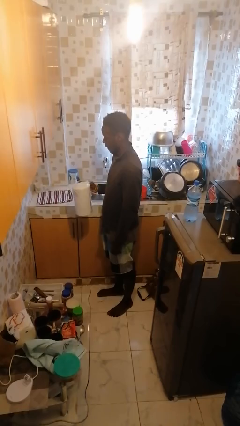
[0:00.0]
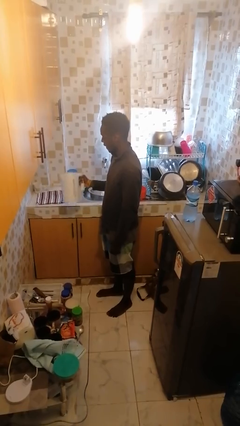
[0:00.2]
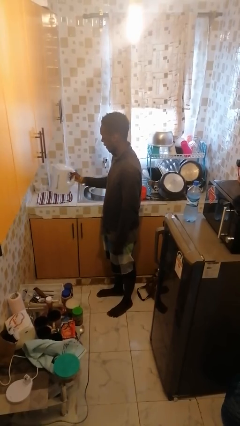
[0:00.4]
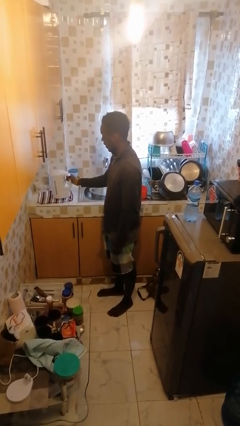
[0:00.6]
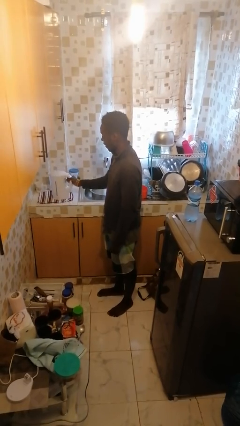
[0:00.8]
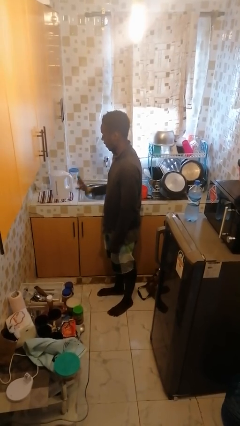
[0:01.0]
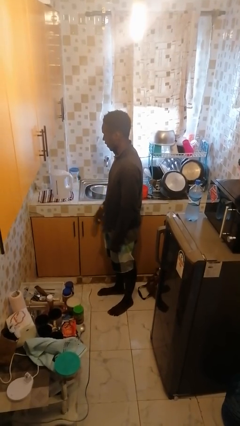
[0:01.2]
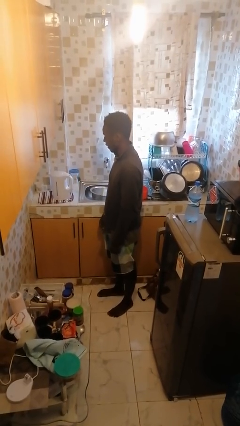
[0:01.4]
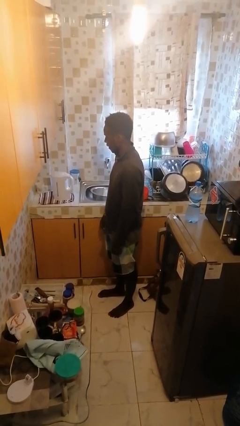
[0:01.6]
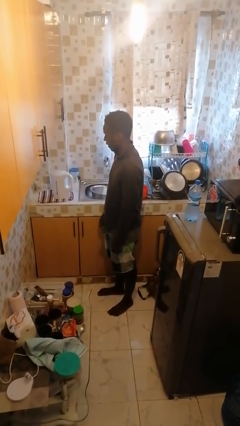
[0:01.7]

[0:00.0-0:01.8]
person puts down object on countertop

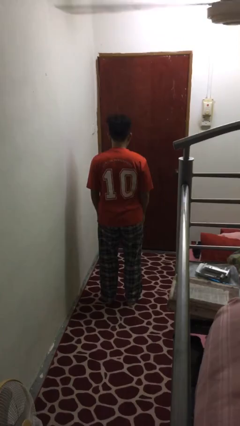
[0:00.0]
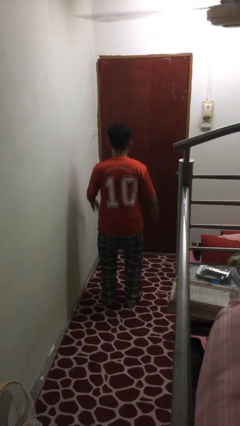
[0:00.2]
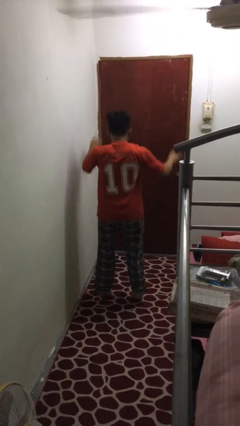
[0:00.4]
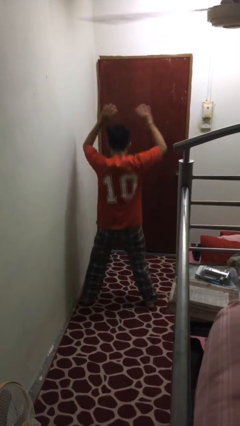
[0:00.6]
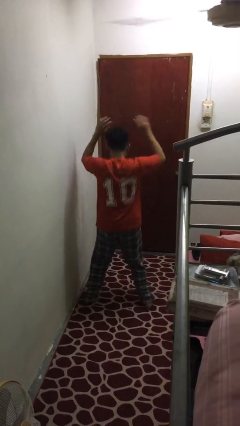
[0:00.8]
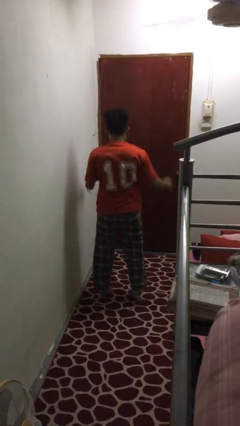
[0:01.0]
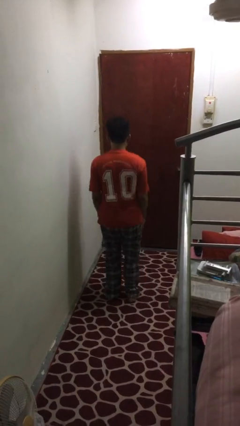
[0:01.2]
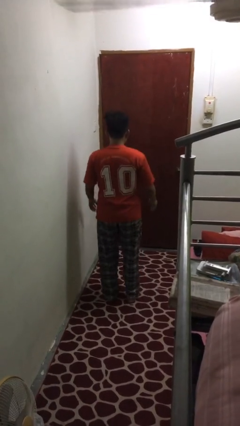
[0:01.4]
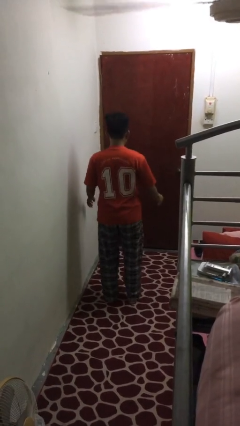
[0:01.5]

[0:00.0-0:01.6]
person exercises with jumping jacks

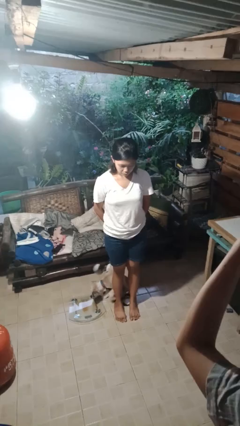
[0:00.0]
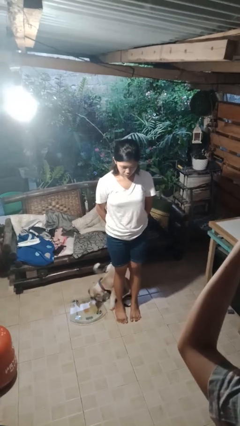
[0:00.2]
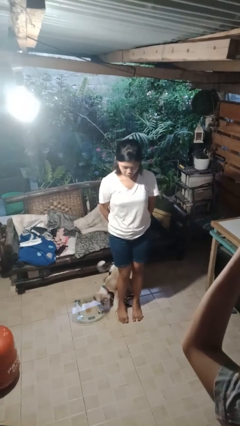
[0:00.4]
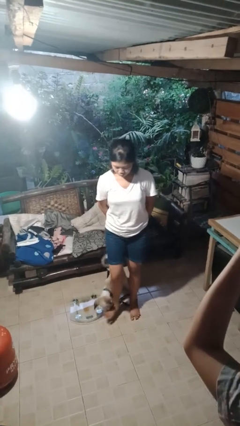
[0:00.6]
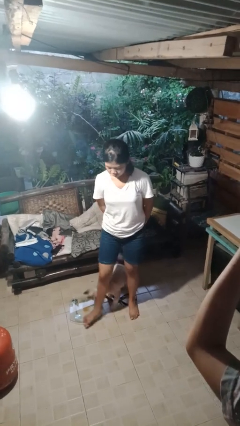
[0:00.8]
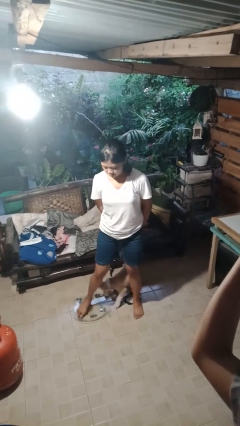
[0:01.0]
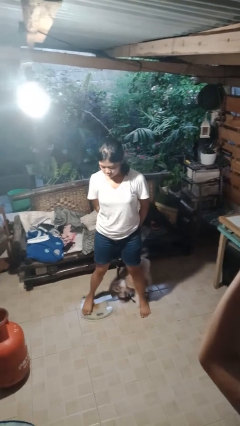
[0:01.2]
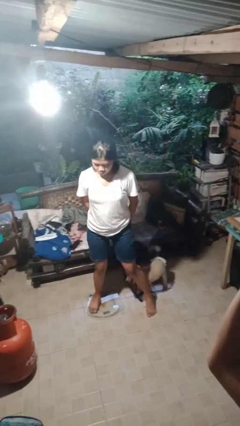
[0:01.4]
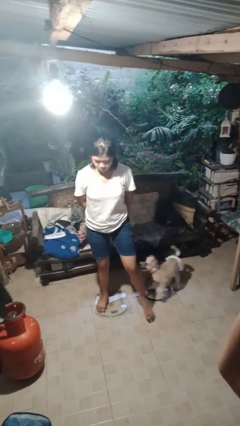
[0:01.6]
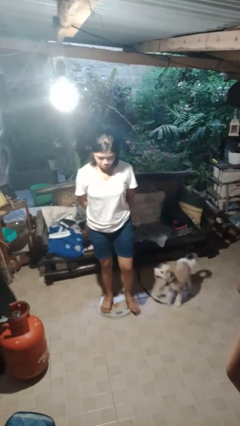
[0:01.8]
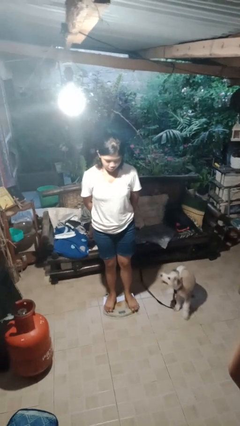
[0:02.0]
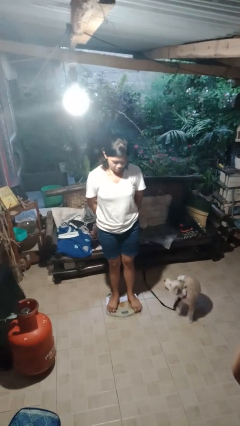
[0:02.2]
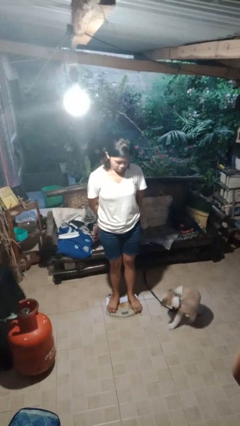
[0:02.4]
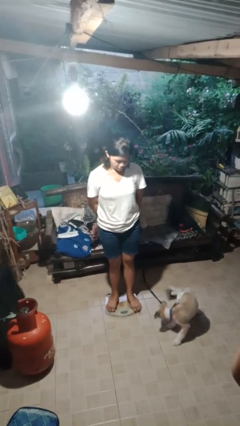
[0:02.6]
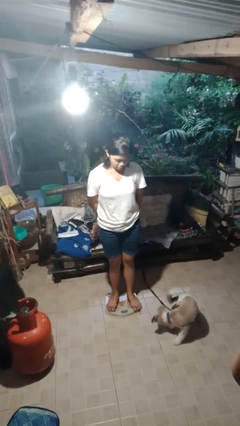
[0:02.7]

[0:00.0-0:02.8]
person uses bodyweight scale

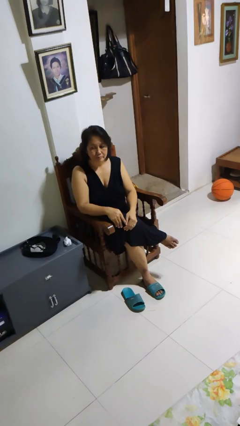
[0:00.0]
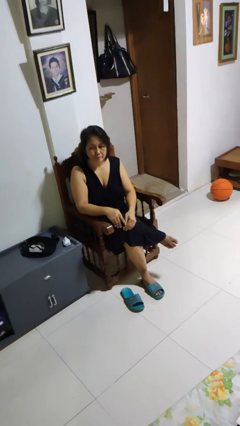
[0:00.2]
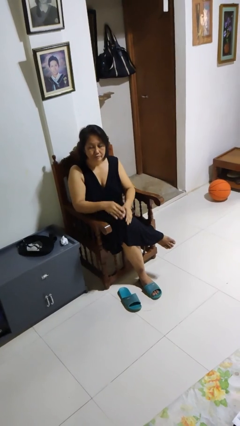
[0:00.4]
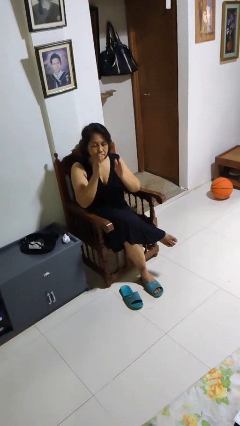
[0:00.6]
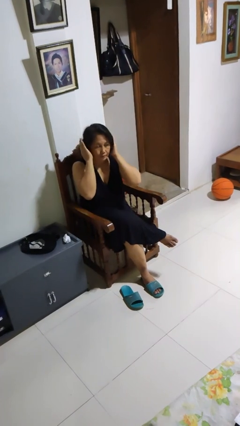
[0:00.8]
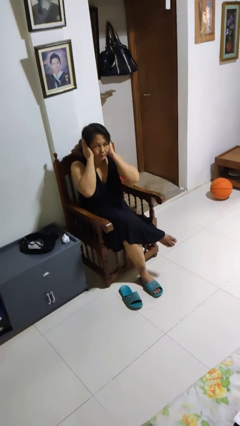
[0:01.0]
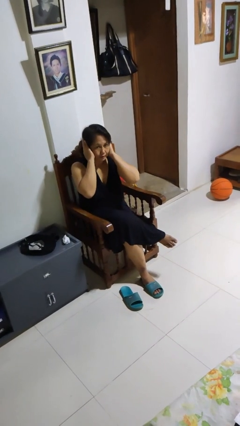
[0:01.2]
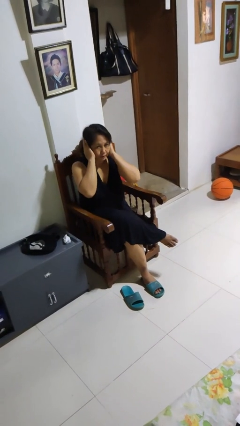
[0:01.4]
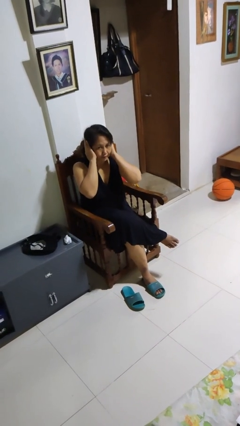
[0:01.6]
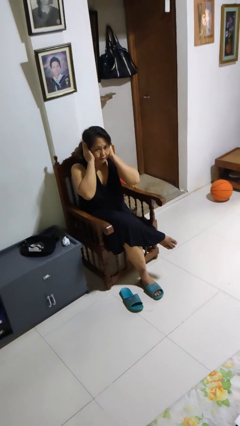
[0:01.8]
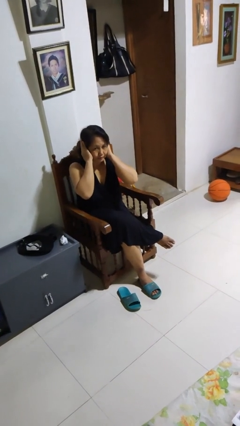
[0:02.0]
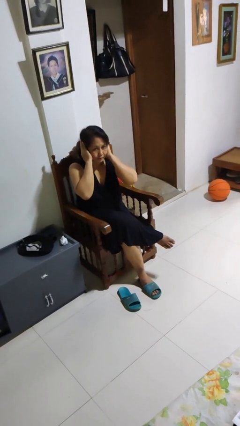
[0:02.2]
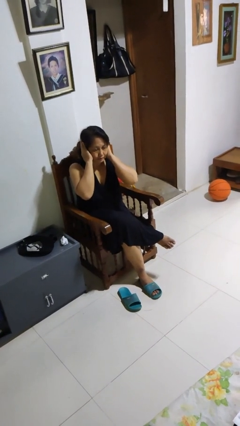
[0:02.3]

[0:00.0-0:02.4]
person puts fingers in ear

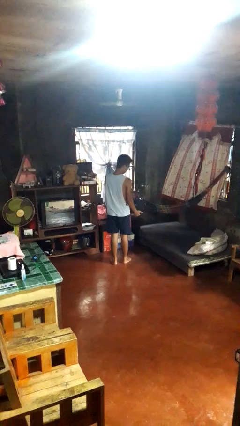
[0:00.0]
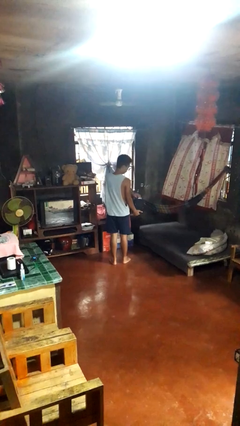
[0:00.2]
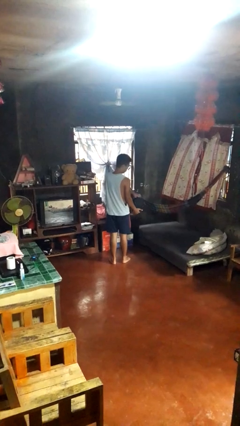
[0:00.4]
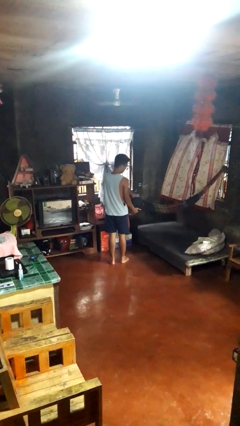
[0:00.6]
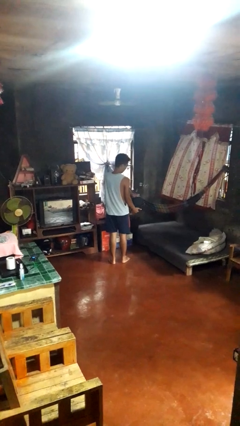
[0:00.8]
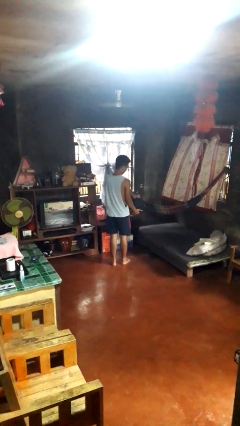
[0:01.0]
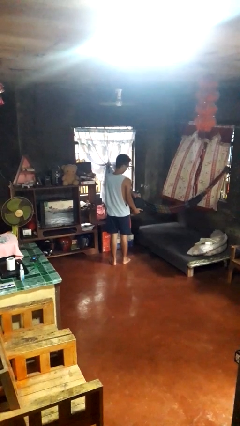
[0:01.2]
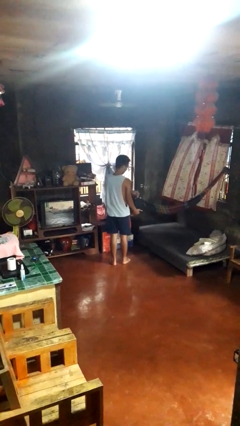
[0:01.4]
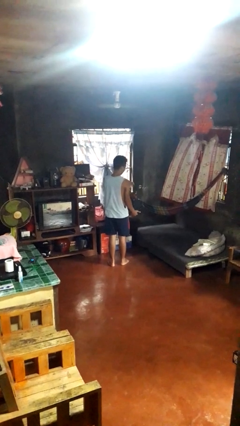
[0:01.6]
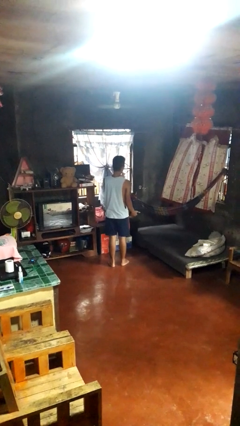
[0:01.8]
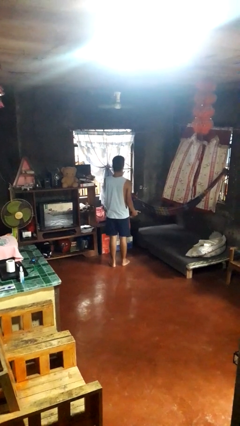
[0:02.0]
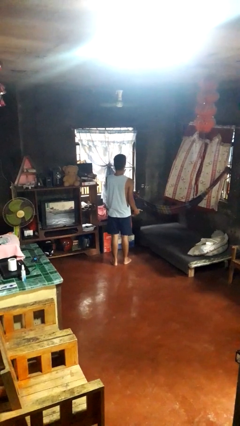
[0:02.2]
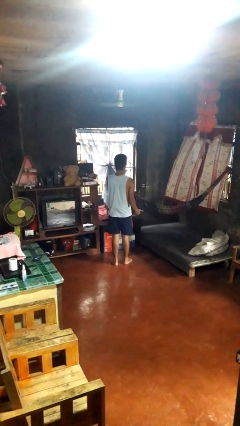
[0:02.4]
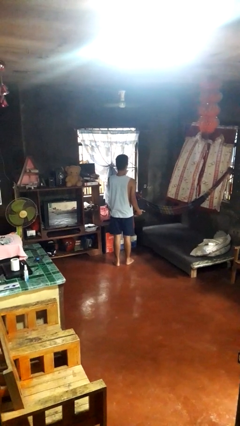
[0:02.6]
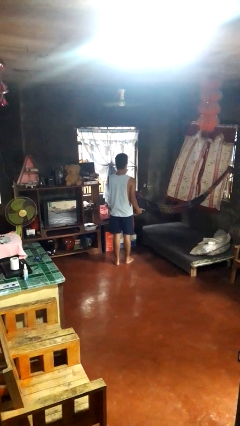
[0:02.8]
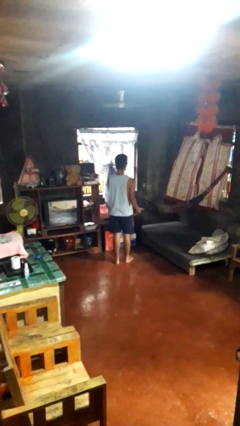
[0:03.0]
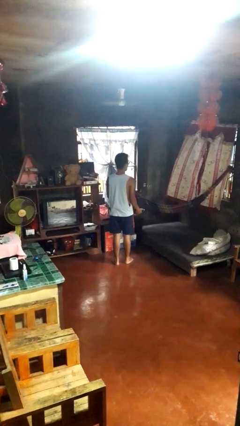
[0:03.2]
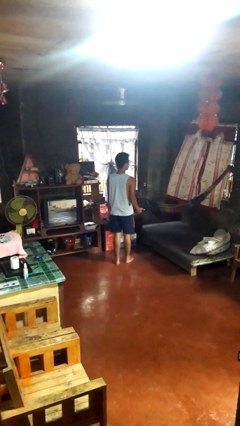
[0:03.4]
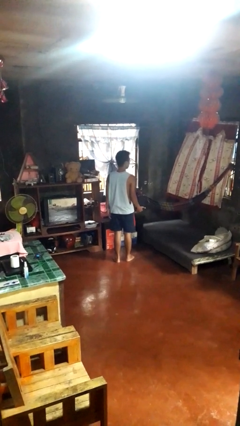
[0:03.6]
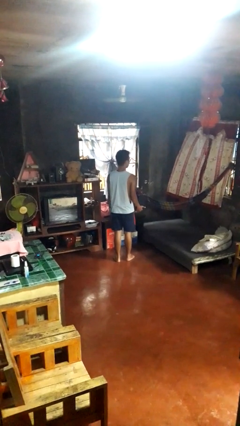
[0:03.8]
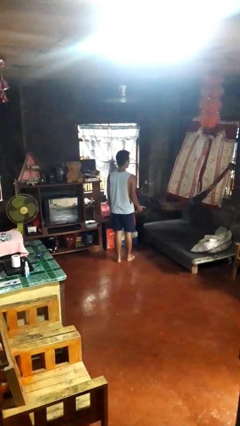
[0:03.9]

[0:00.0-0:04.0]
person eats snack from bag

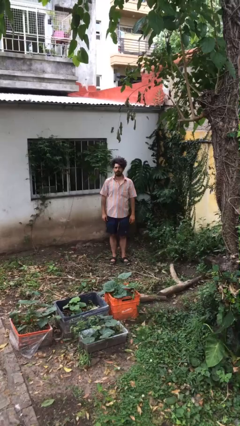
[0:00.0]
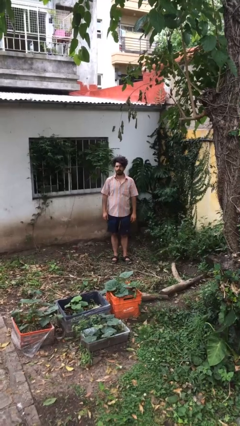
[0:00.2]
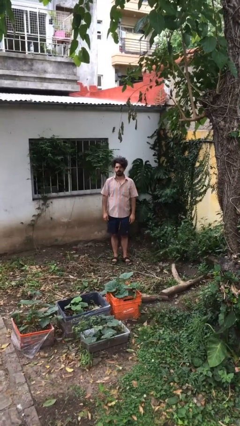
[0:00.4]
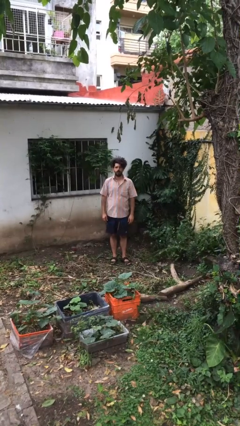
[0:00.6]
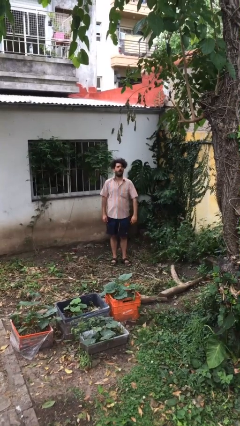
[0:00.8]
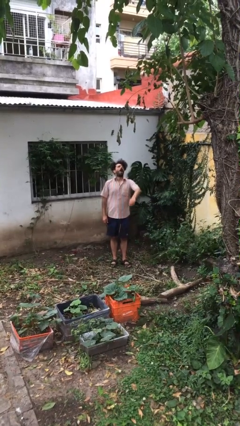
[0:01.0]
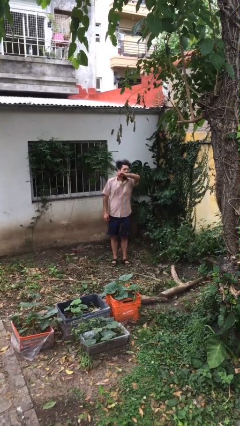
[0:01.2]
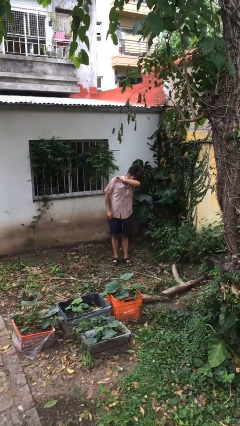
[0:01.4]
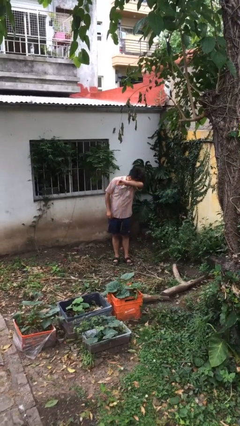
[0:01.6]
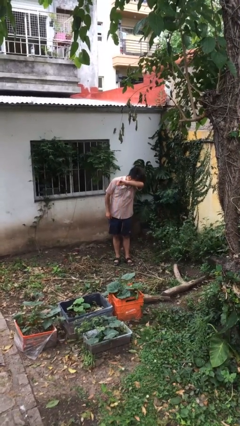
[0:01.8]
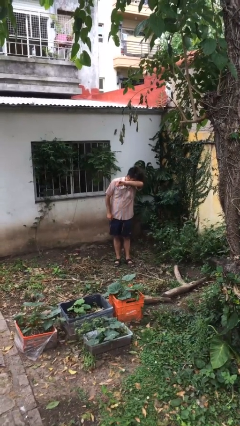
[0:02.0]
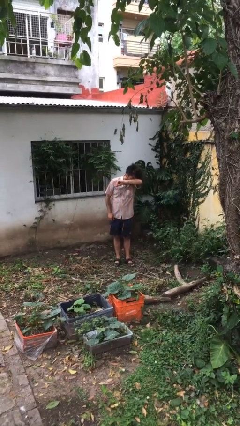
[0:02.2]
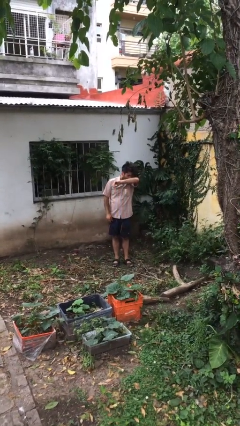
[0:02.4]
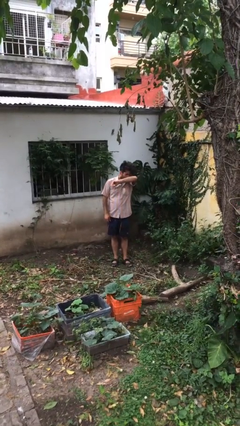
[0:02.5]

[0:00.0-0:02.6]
person sneezes into arm

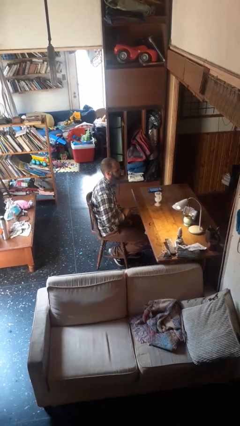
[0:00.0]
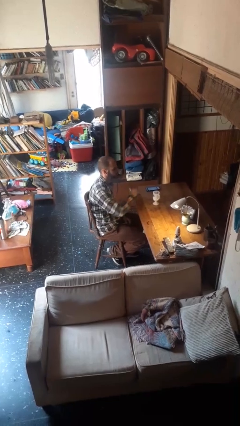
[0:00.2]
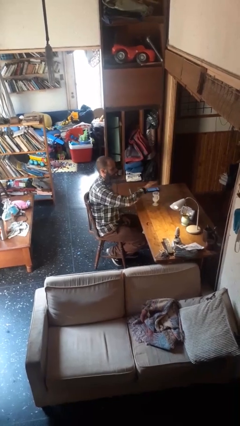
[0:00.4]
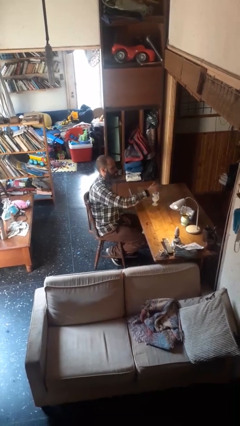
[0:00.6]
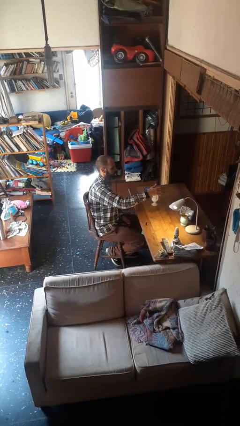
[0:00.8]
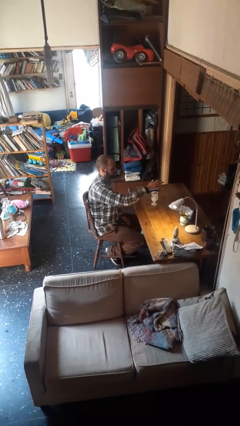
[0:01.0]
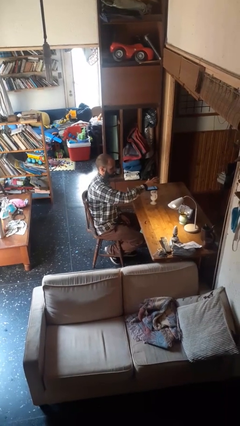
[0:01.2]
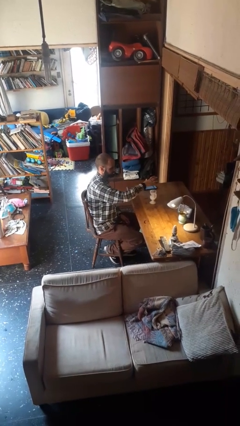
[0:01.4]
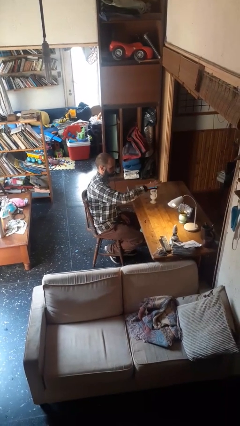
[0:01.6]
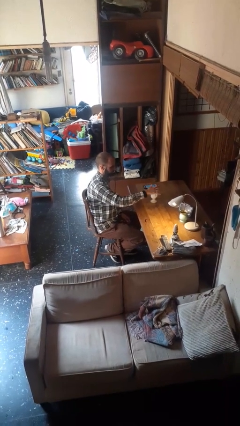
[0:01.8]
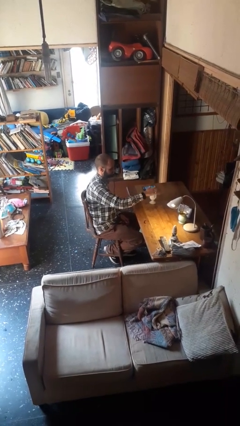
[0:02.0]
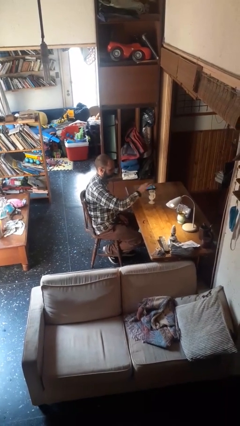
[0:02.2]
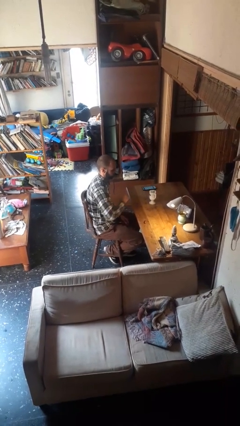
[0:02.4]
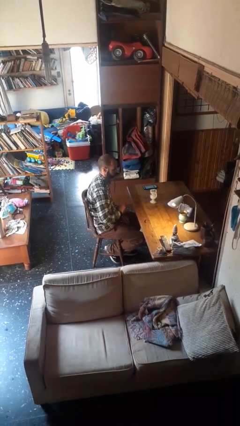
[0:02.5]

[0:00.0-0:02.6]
person waves hand over object
